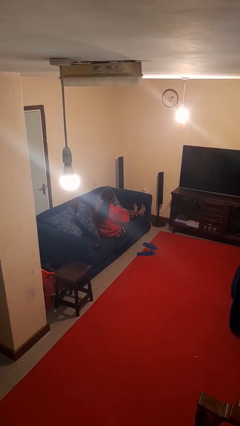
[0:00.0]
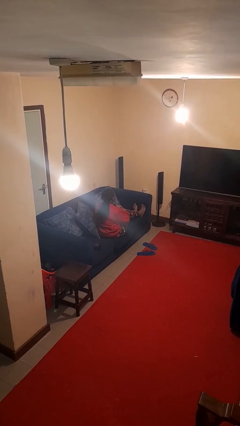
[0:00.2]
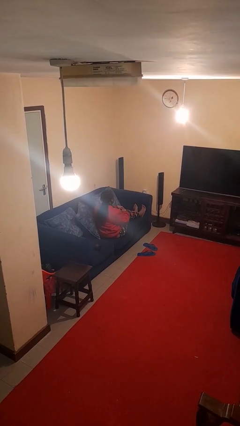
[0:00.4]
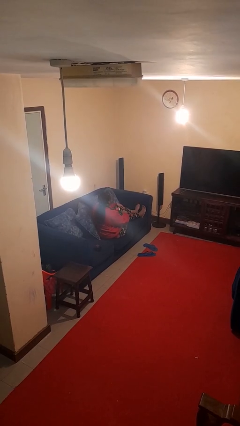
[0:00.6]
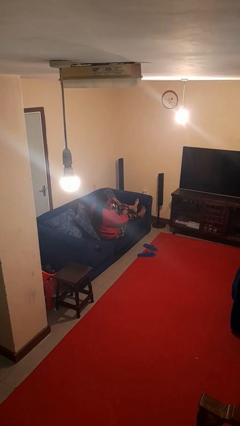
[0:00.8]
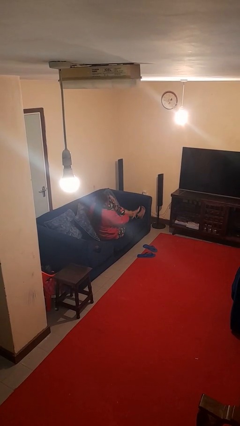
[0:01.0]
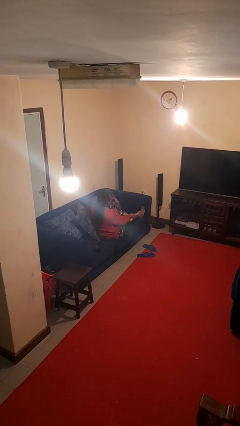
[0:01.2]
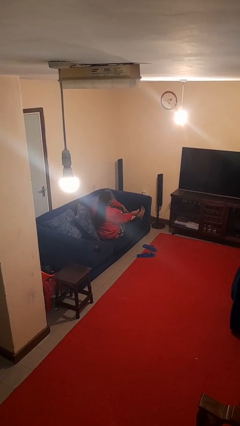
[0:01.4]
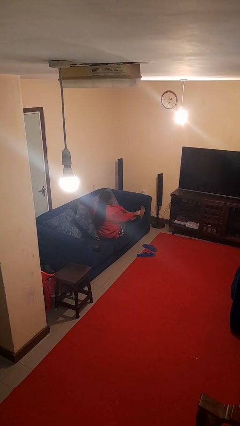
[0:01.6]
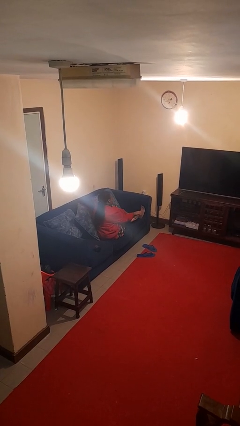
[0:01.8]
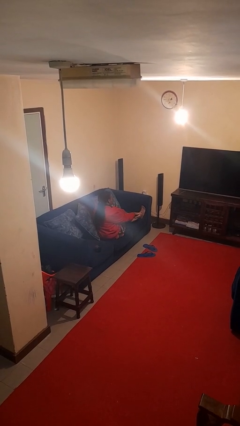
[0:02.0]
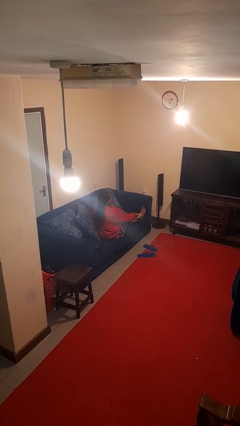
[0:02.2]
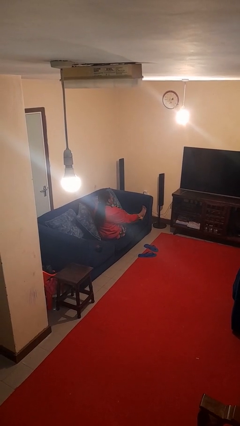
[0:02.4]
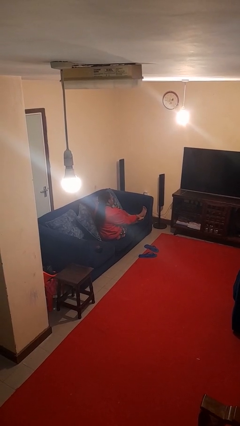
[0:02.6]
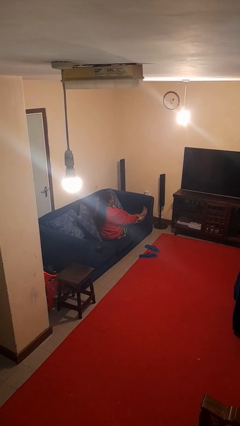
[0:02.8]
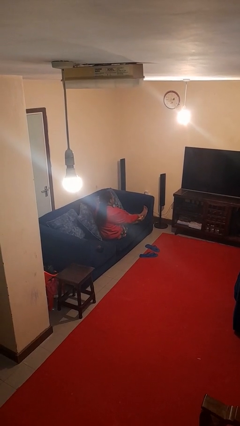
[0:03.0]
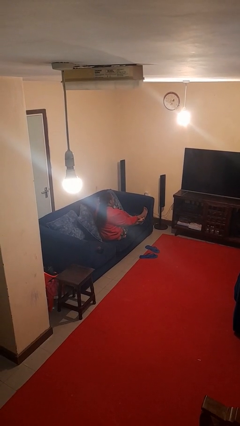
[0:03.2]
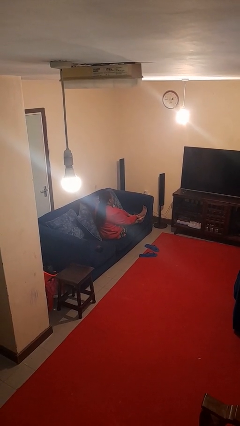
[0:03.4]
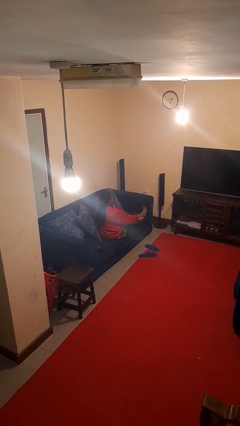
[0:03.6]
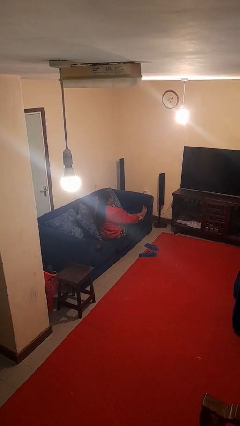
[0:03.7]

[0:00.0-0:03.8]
person rubs foot

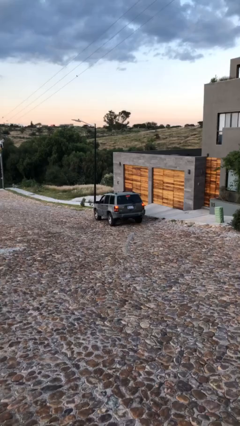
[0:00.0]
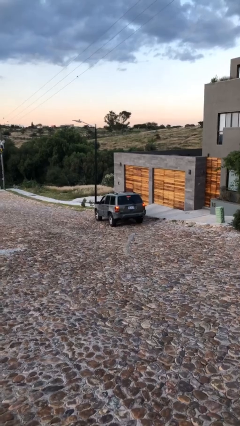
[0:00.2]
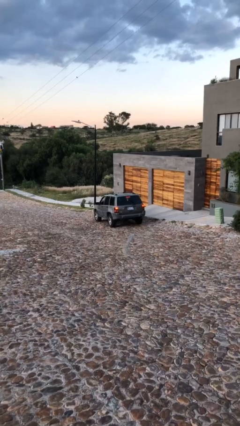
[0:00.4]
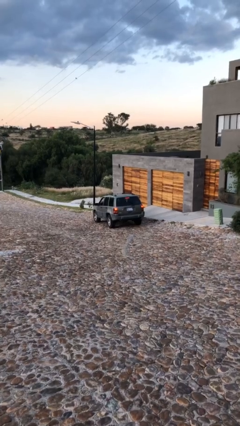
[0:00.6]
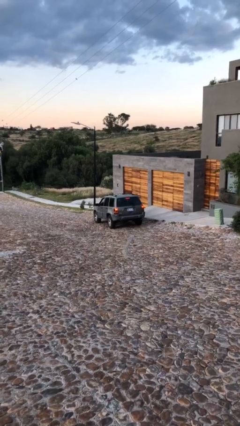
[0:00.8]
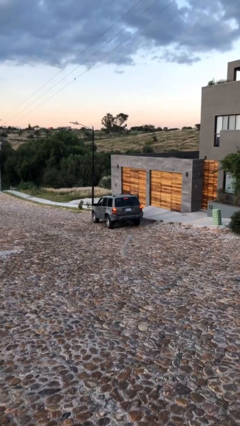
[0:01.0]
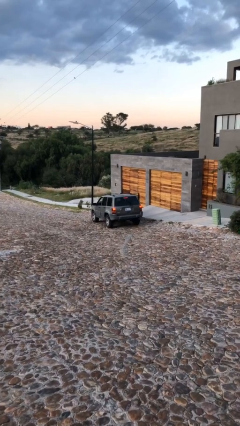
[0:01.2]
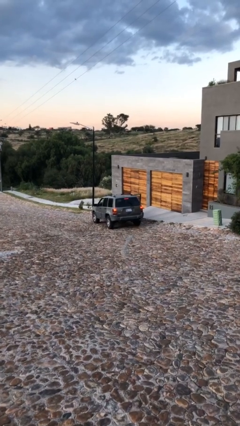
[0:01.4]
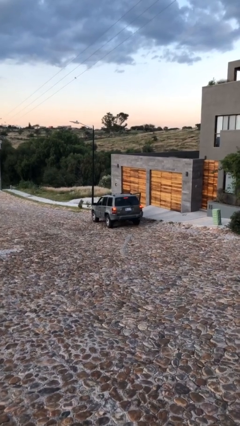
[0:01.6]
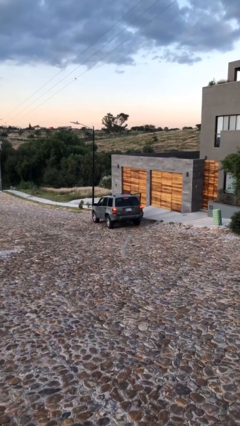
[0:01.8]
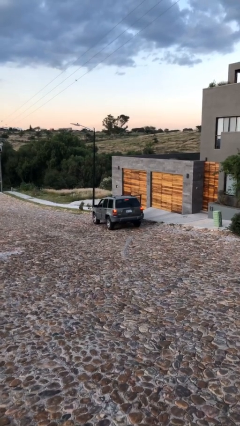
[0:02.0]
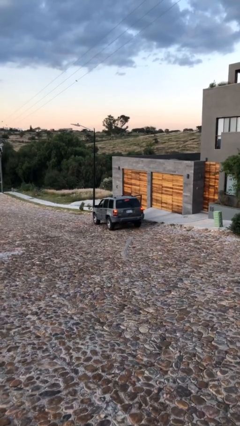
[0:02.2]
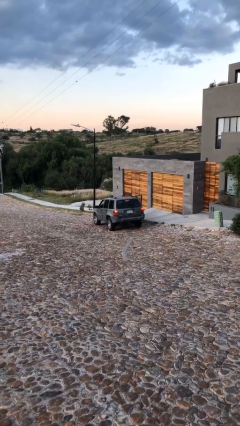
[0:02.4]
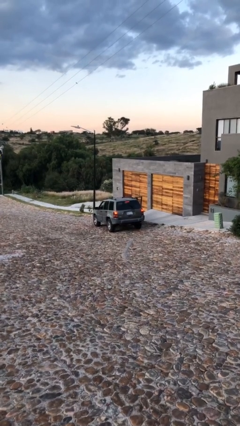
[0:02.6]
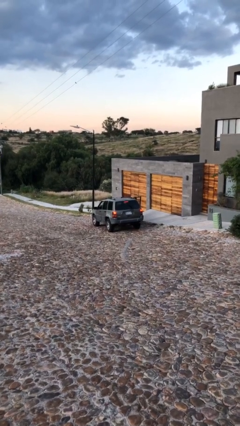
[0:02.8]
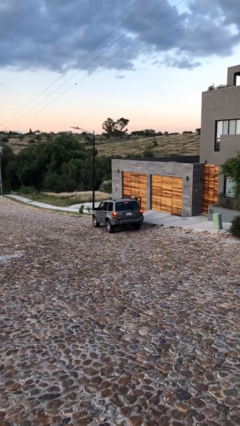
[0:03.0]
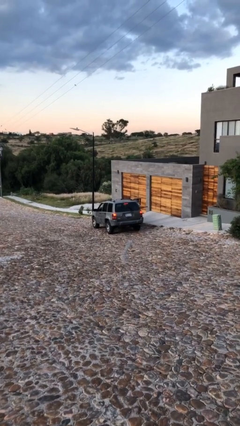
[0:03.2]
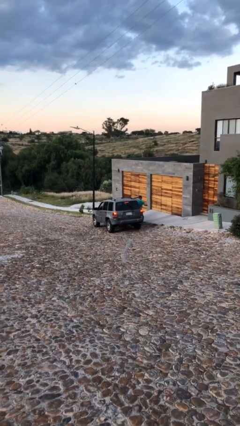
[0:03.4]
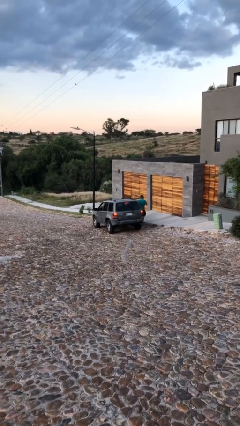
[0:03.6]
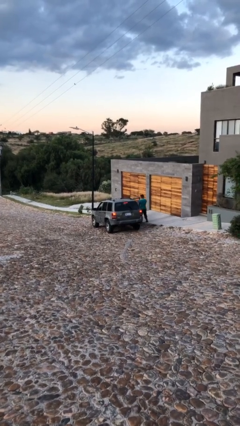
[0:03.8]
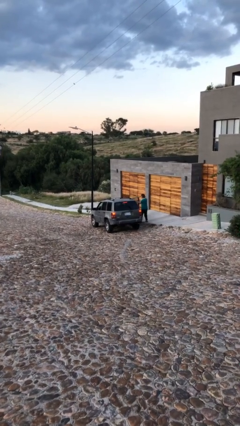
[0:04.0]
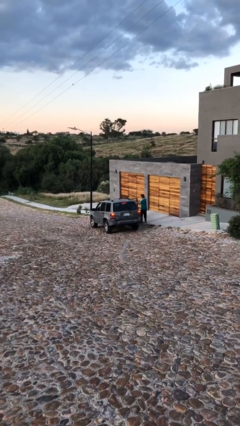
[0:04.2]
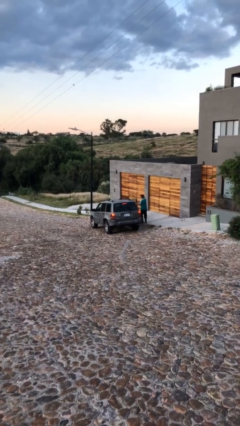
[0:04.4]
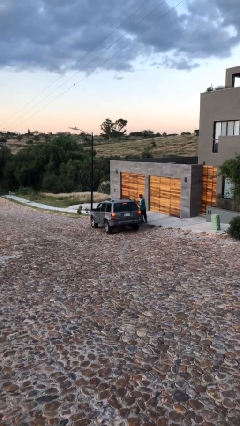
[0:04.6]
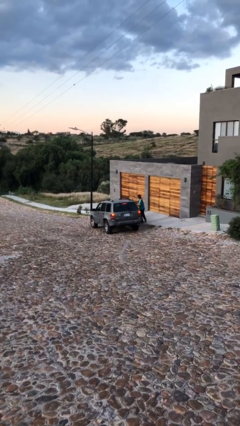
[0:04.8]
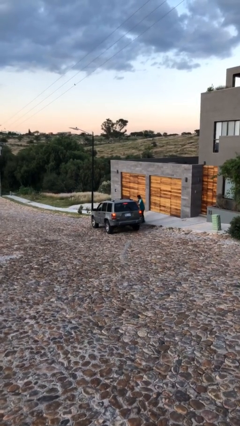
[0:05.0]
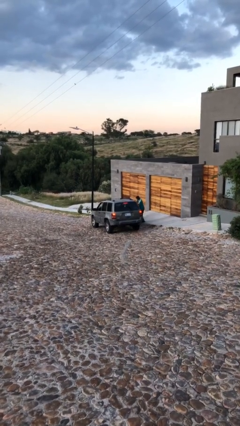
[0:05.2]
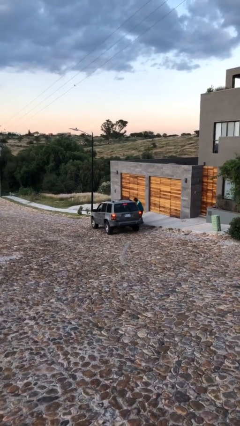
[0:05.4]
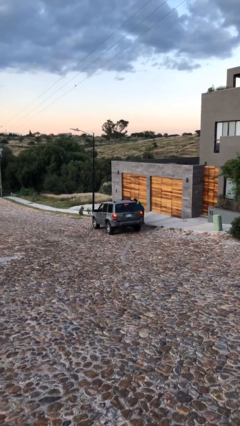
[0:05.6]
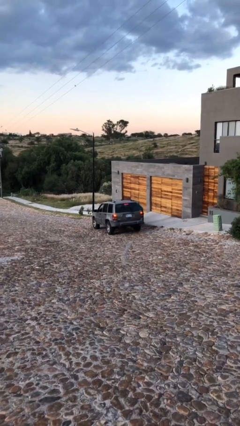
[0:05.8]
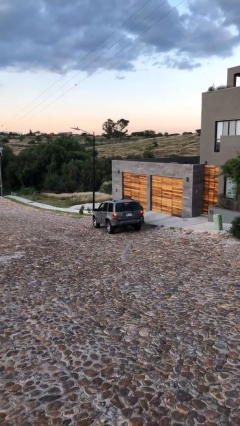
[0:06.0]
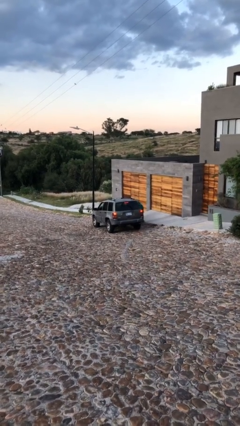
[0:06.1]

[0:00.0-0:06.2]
car drops off person

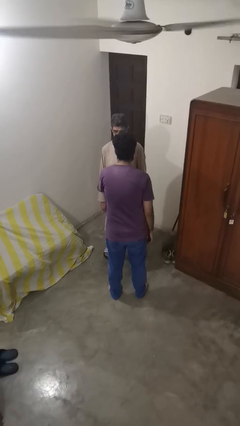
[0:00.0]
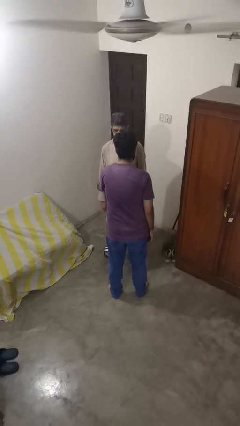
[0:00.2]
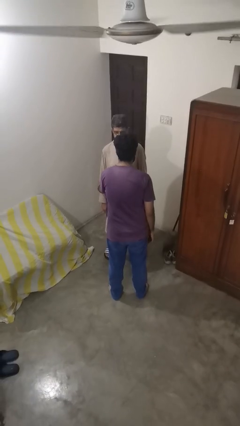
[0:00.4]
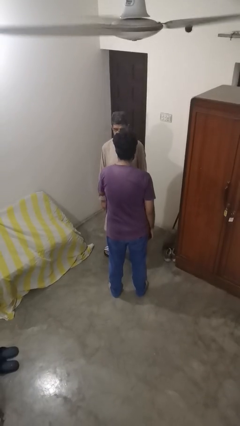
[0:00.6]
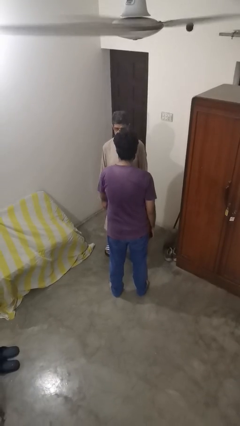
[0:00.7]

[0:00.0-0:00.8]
person grabs person by forearm

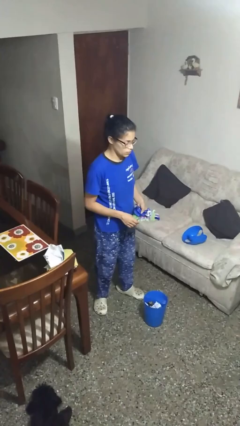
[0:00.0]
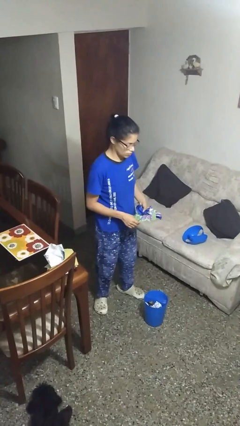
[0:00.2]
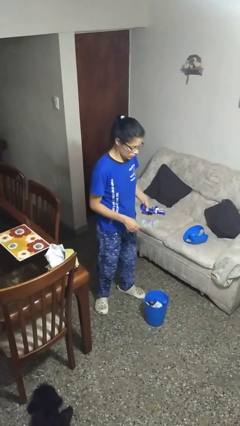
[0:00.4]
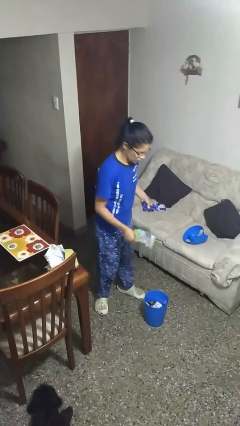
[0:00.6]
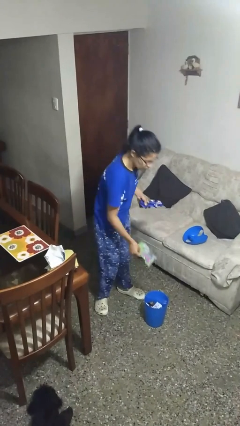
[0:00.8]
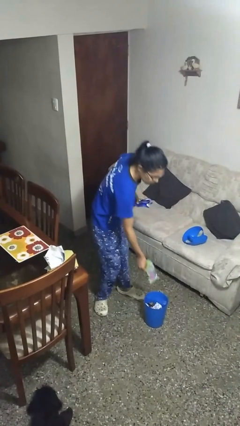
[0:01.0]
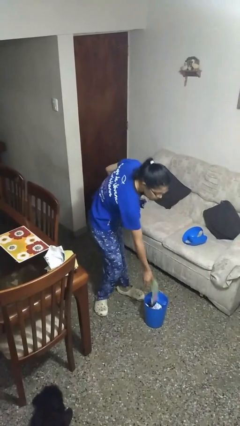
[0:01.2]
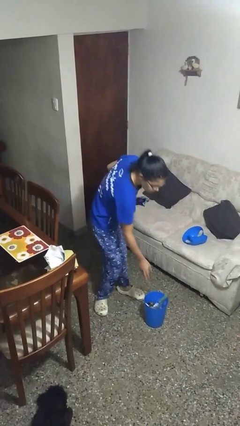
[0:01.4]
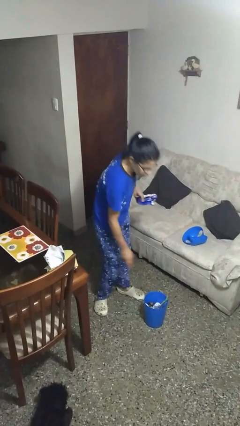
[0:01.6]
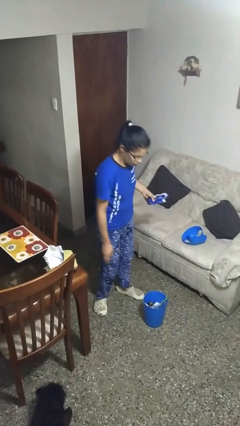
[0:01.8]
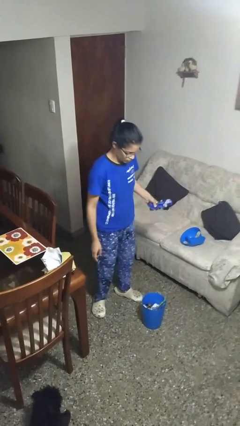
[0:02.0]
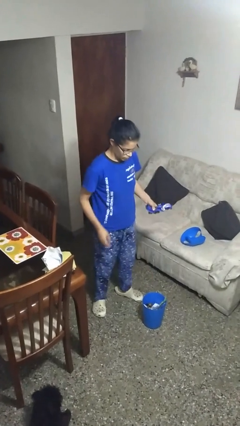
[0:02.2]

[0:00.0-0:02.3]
person discards trash

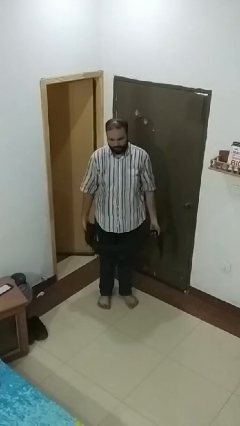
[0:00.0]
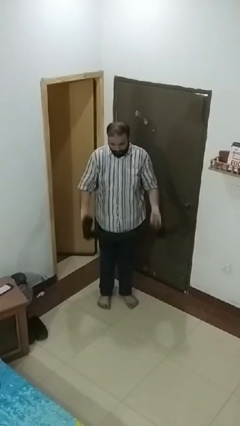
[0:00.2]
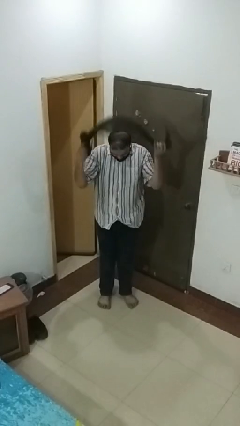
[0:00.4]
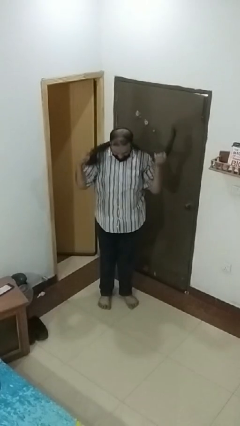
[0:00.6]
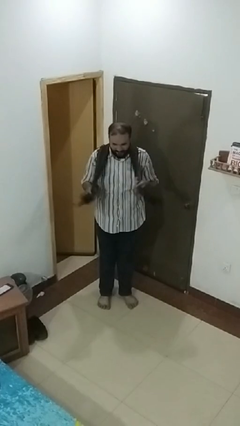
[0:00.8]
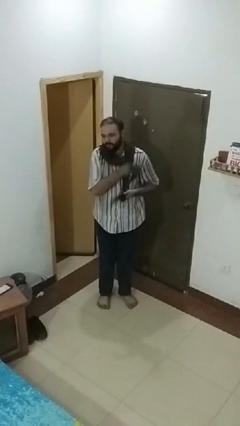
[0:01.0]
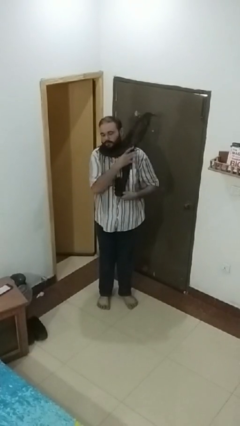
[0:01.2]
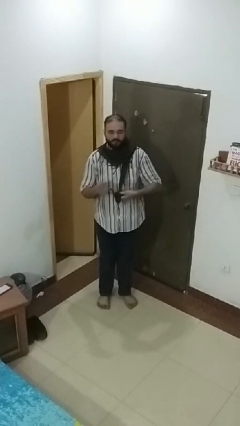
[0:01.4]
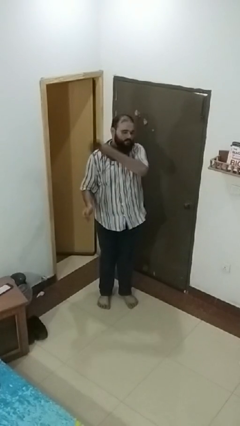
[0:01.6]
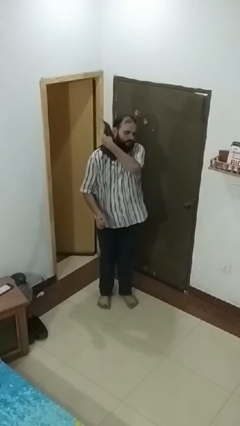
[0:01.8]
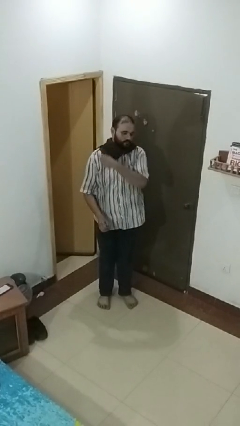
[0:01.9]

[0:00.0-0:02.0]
person puts on scarf

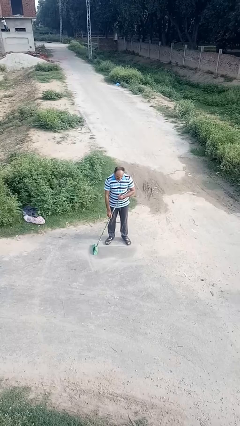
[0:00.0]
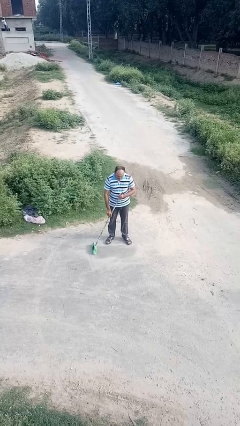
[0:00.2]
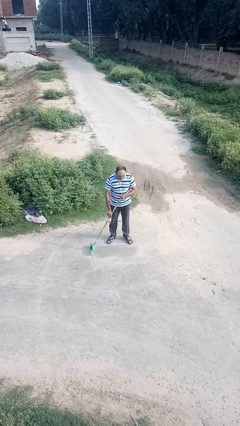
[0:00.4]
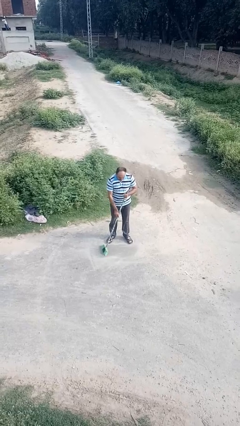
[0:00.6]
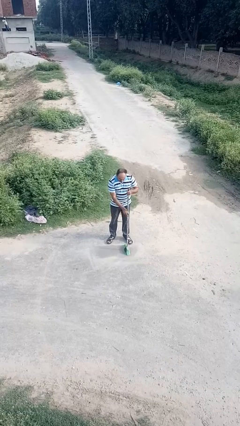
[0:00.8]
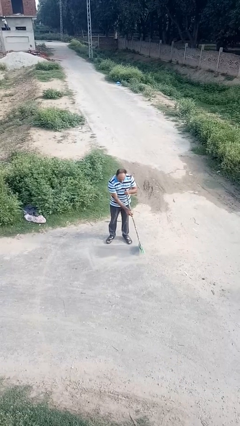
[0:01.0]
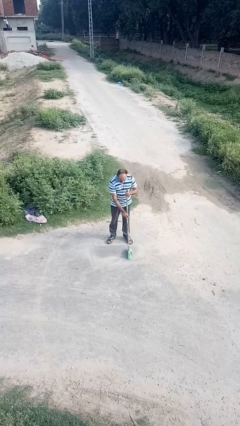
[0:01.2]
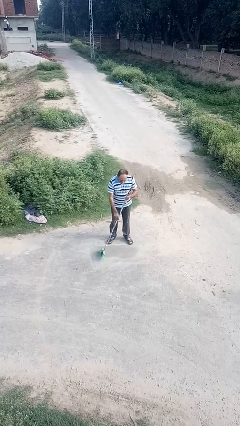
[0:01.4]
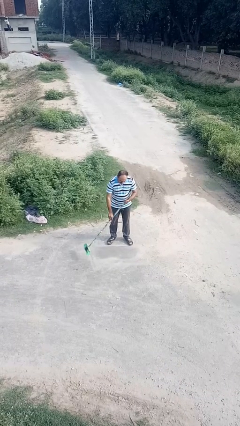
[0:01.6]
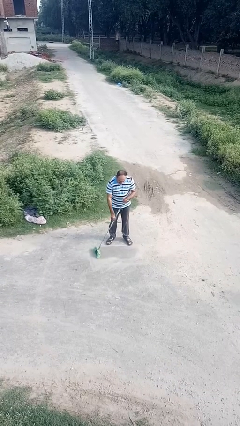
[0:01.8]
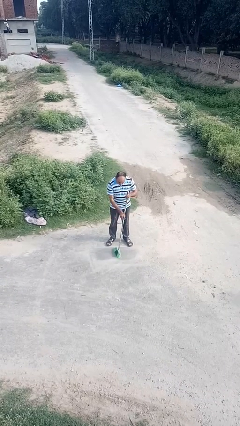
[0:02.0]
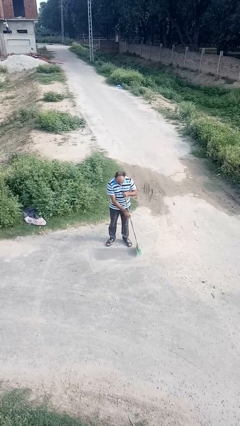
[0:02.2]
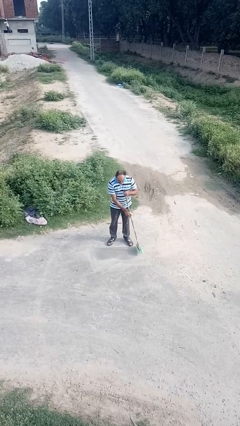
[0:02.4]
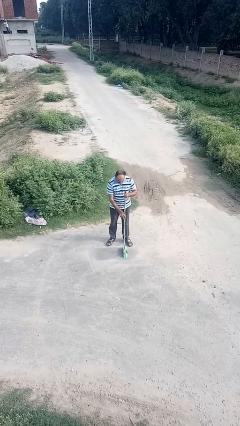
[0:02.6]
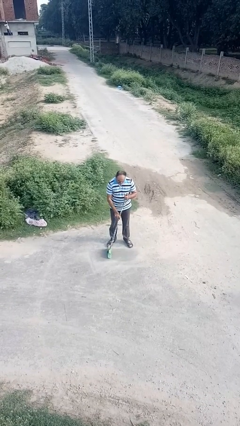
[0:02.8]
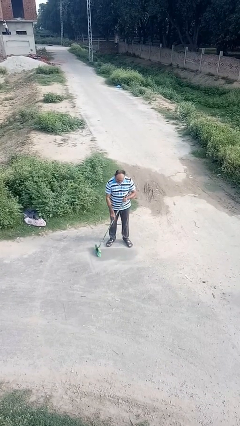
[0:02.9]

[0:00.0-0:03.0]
person sweeps floor
